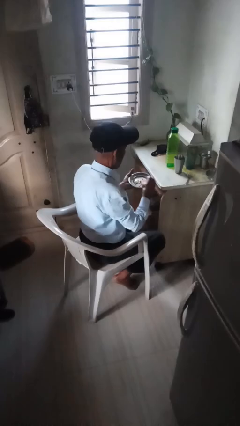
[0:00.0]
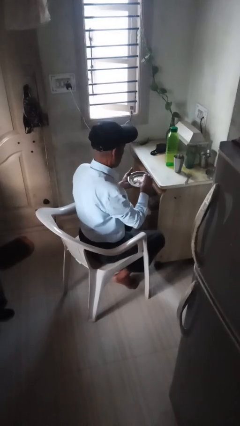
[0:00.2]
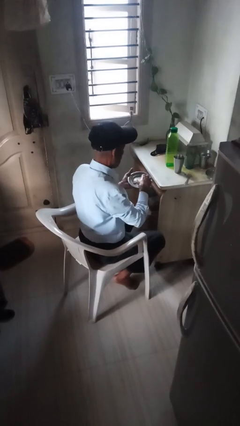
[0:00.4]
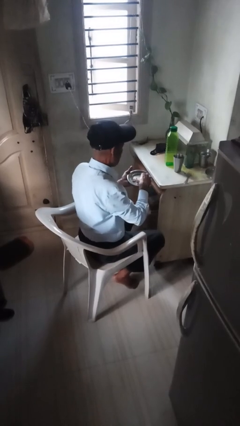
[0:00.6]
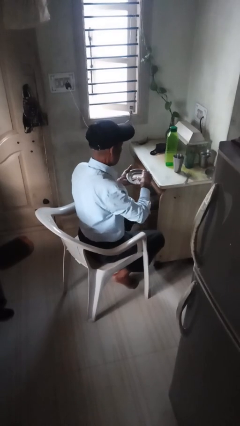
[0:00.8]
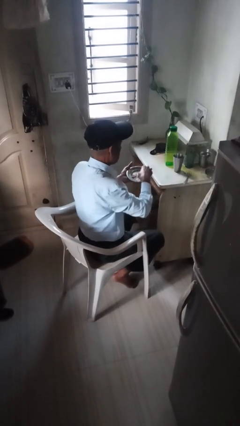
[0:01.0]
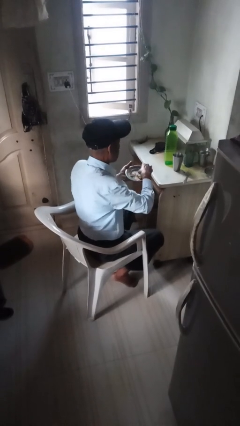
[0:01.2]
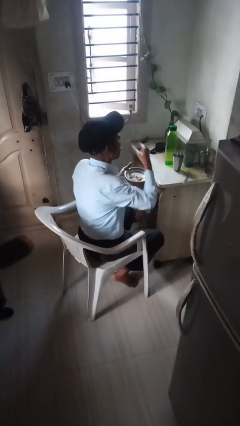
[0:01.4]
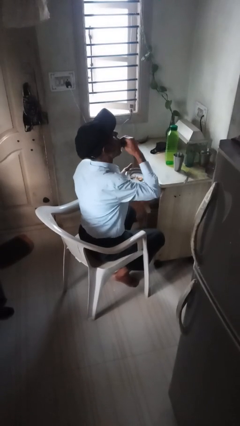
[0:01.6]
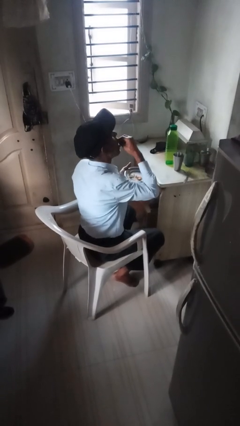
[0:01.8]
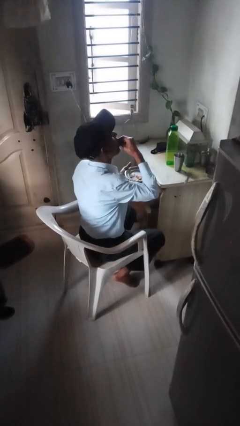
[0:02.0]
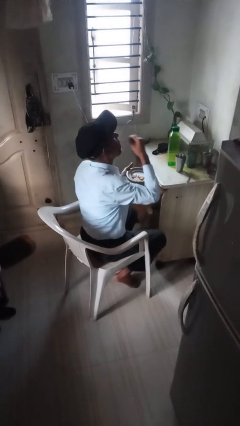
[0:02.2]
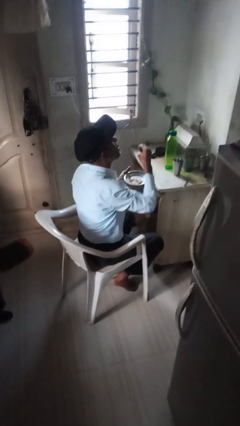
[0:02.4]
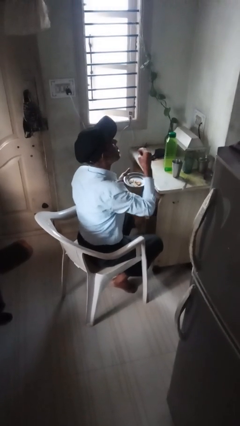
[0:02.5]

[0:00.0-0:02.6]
person eats with hands

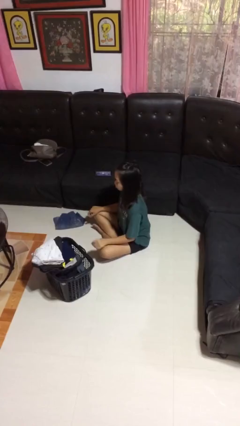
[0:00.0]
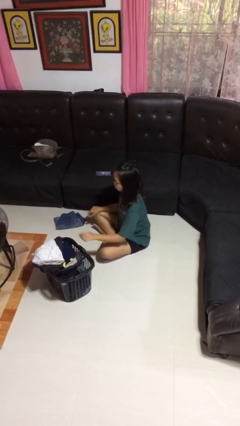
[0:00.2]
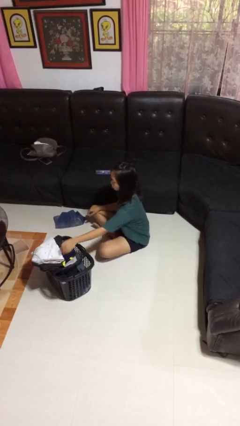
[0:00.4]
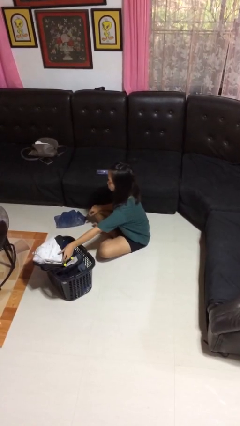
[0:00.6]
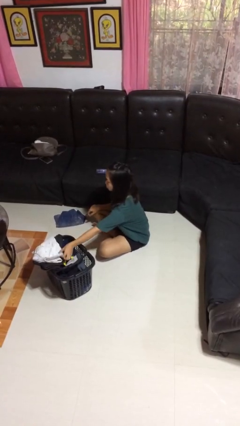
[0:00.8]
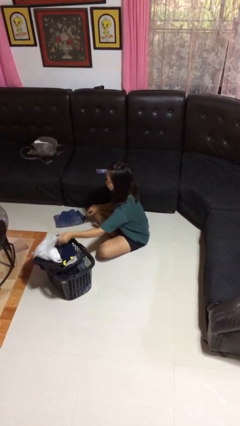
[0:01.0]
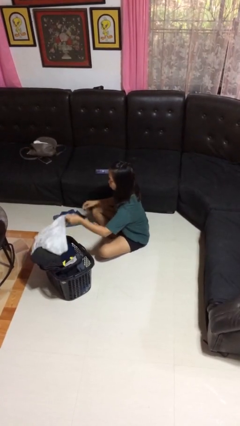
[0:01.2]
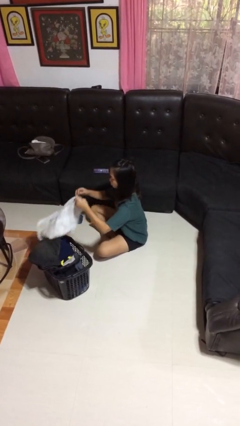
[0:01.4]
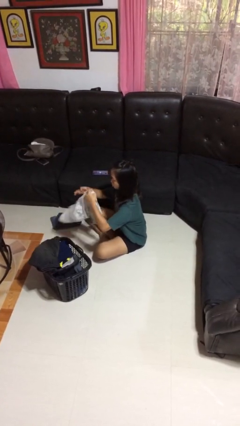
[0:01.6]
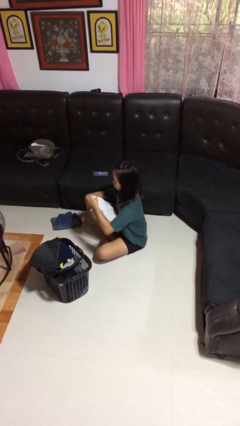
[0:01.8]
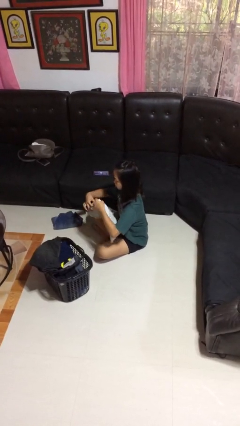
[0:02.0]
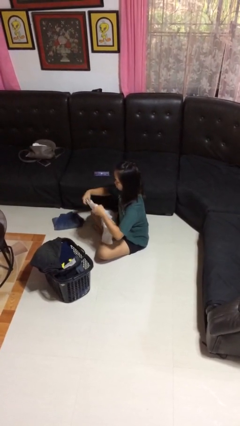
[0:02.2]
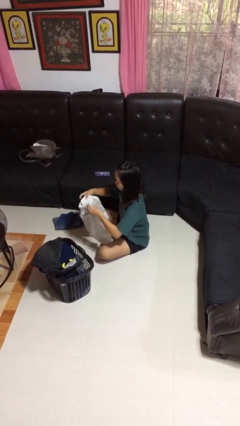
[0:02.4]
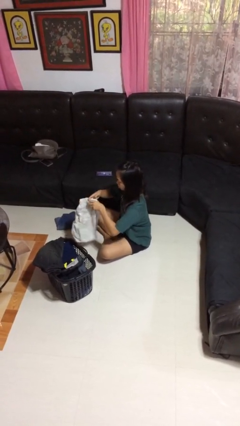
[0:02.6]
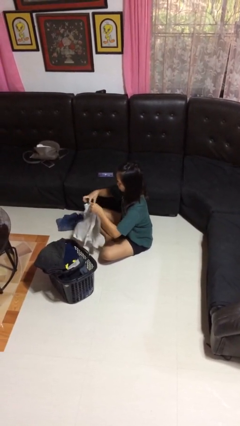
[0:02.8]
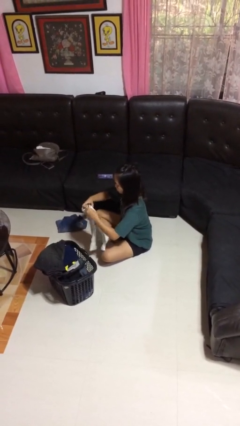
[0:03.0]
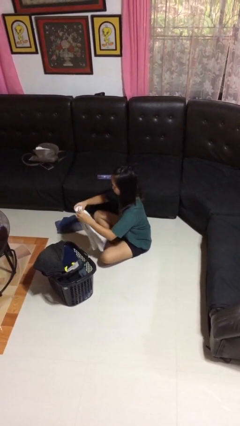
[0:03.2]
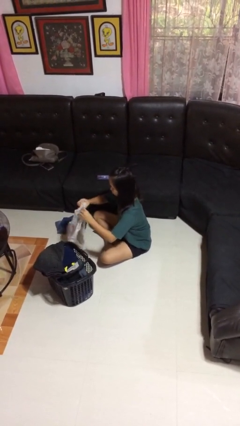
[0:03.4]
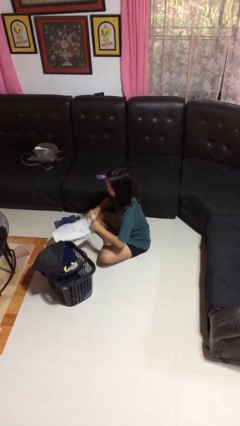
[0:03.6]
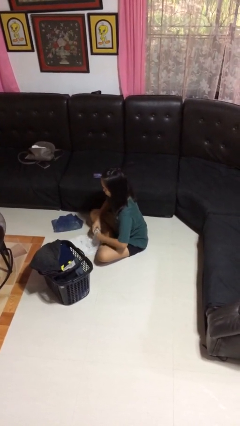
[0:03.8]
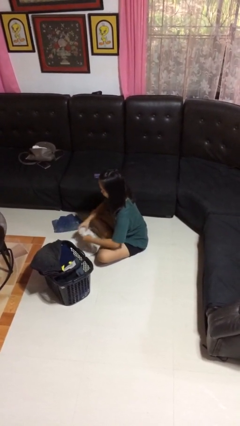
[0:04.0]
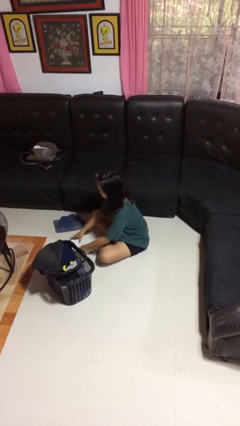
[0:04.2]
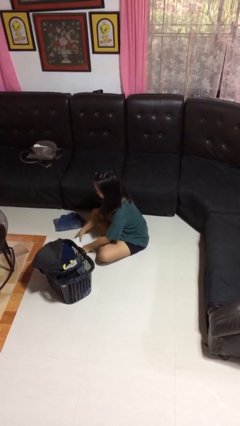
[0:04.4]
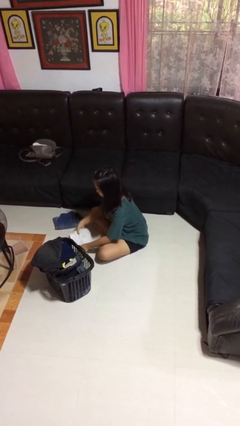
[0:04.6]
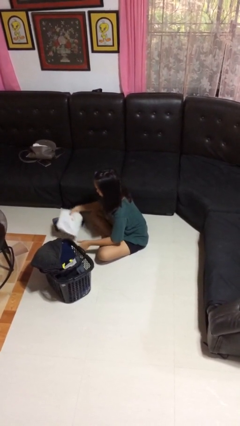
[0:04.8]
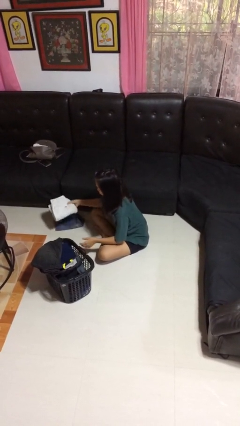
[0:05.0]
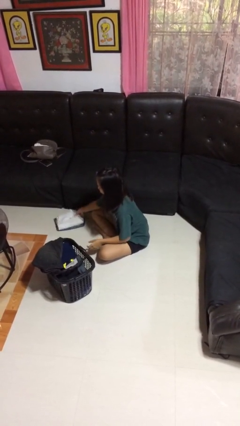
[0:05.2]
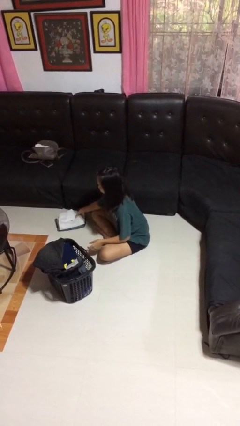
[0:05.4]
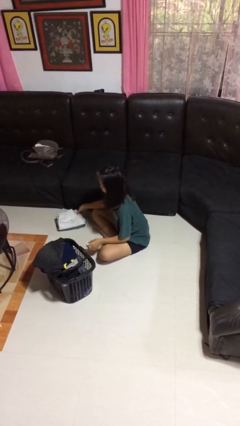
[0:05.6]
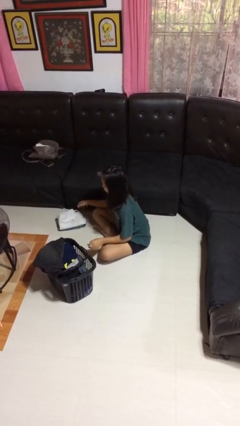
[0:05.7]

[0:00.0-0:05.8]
person folds pants

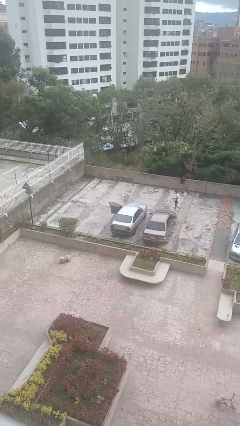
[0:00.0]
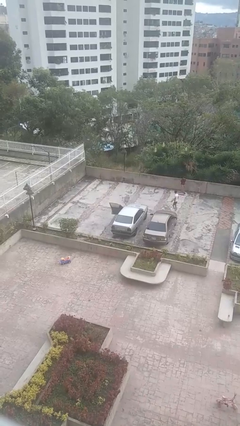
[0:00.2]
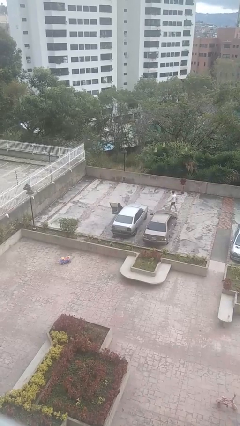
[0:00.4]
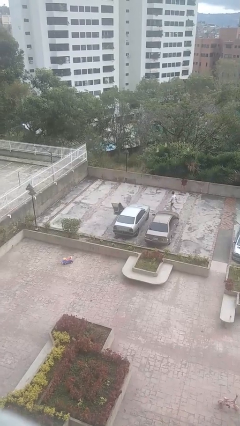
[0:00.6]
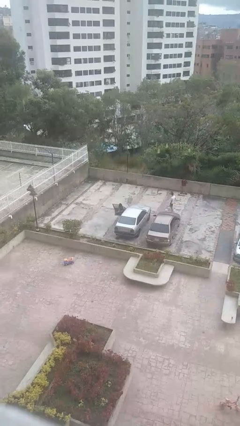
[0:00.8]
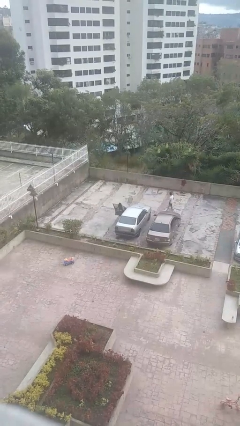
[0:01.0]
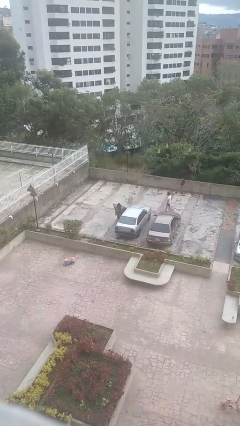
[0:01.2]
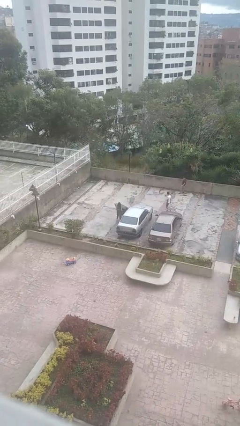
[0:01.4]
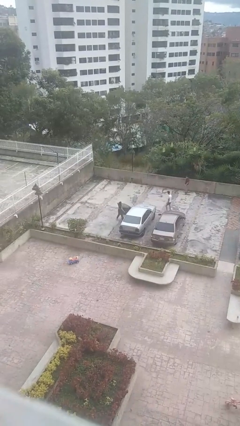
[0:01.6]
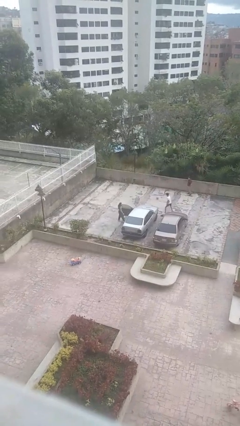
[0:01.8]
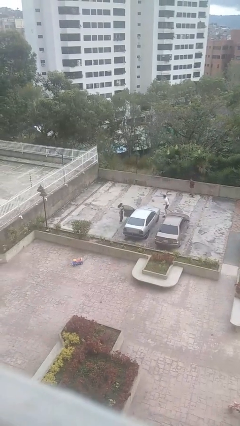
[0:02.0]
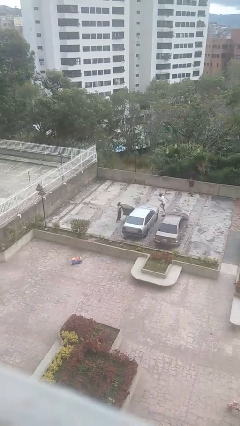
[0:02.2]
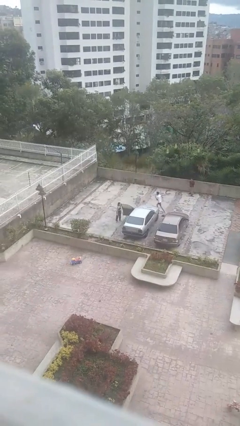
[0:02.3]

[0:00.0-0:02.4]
person exits car

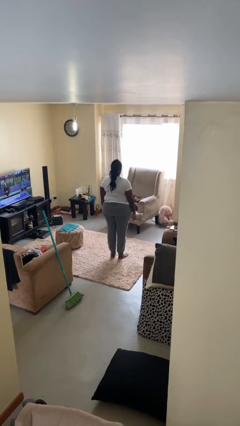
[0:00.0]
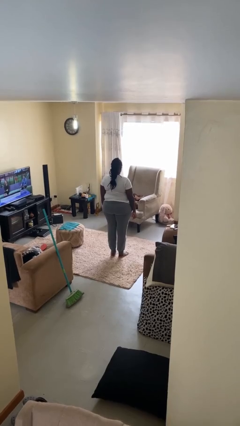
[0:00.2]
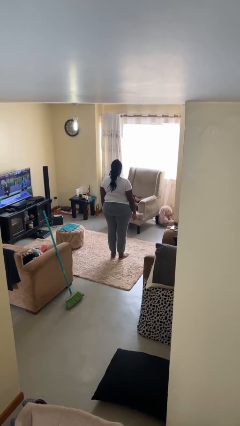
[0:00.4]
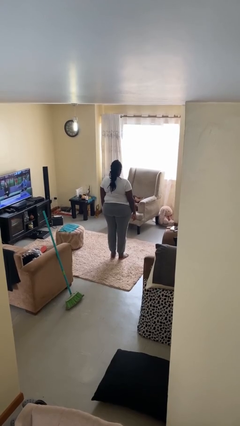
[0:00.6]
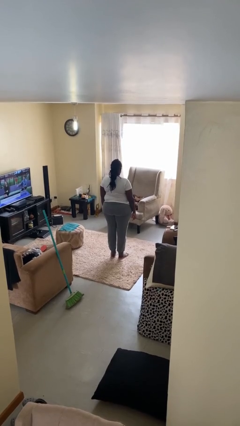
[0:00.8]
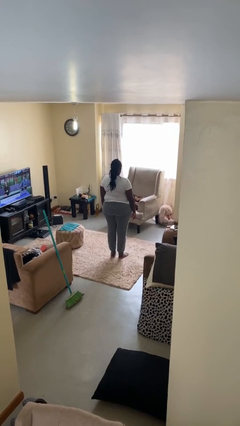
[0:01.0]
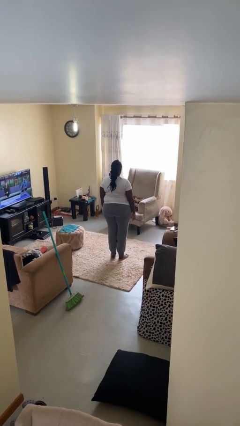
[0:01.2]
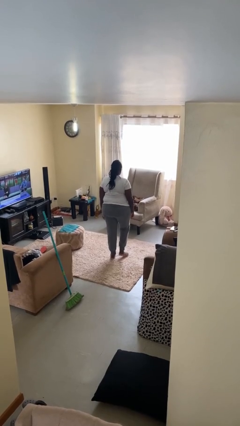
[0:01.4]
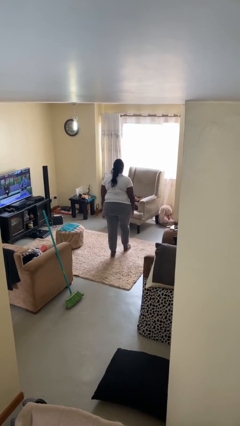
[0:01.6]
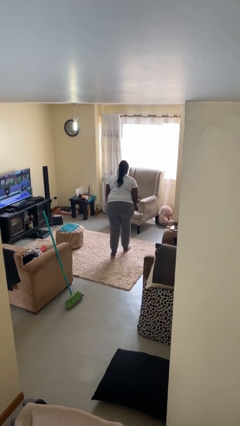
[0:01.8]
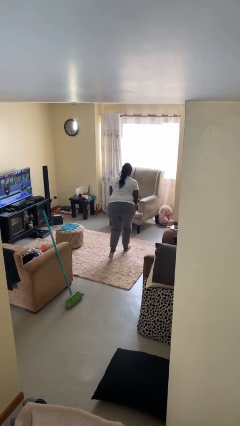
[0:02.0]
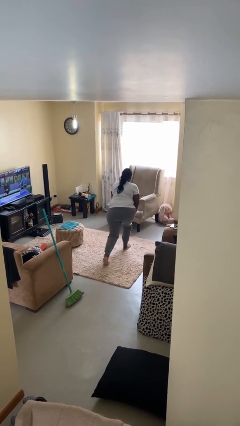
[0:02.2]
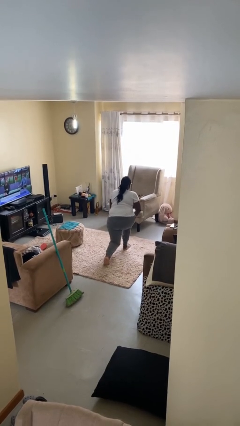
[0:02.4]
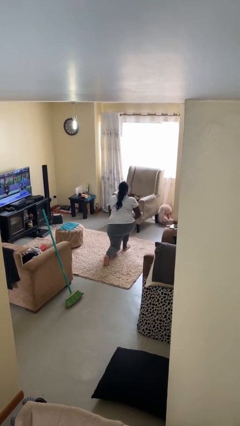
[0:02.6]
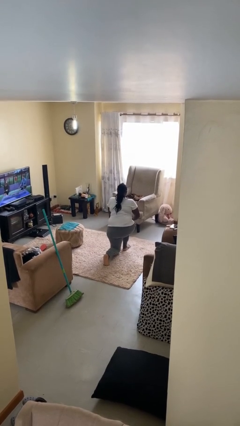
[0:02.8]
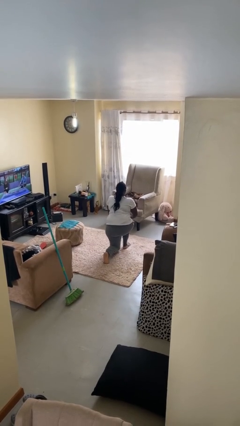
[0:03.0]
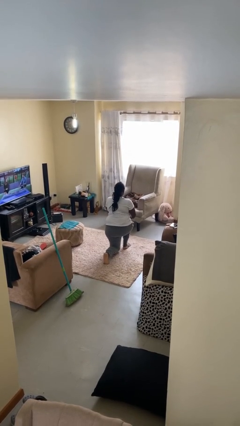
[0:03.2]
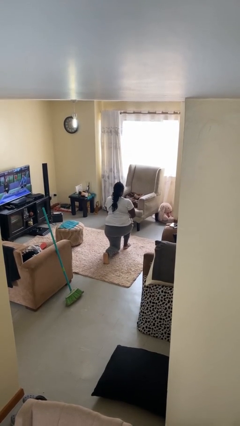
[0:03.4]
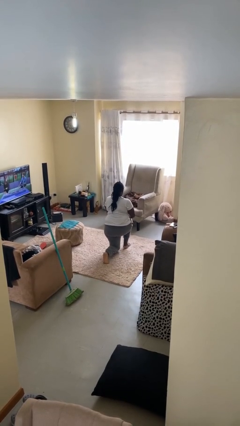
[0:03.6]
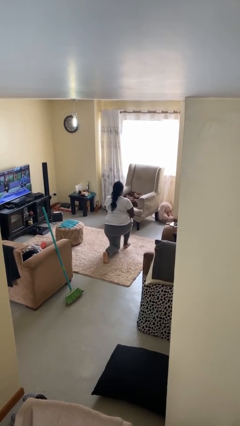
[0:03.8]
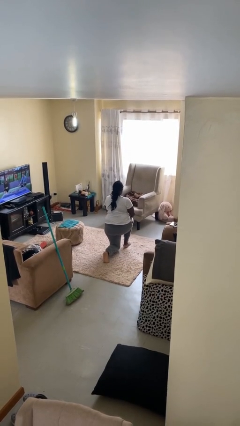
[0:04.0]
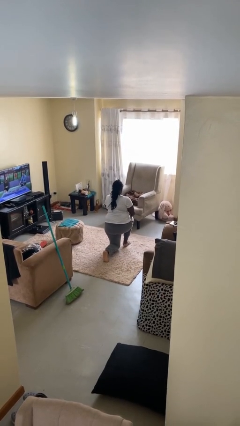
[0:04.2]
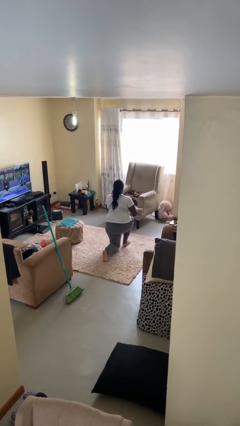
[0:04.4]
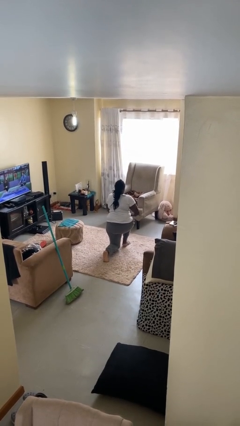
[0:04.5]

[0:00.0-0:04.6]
person kneels

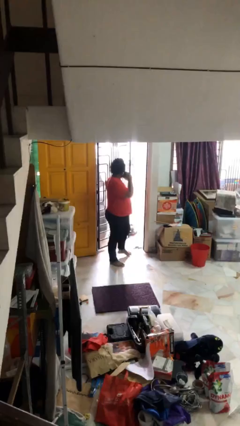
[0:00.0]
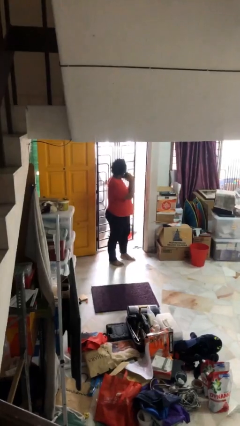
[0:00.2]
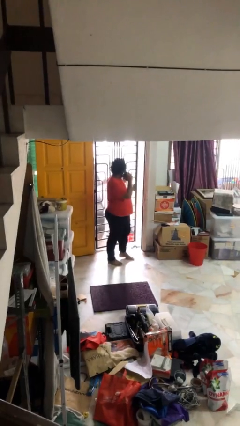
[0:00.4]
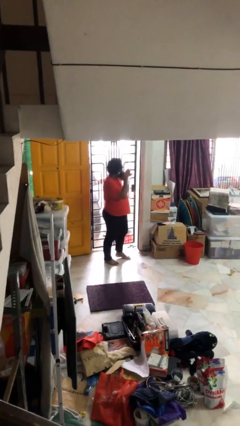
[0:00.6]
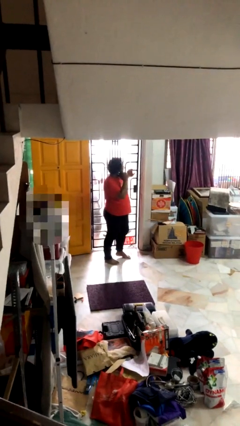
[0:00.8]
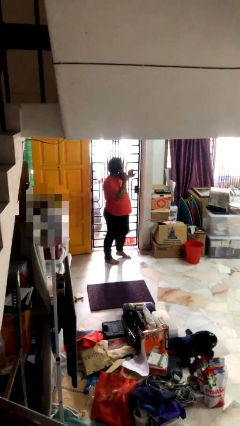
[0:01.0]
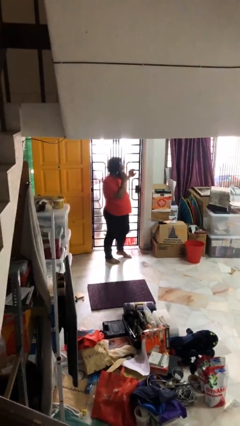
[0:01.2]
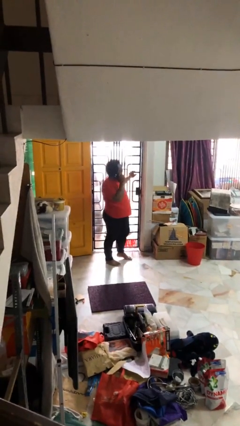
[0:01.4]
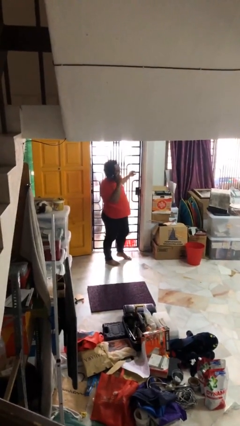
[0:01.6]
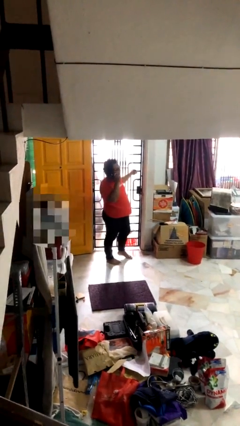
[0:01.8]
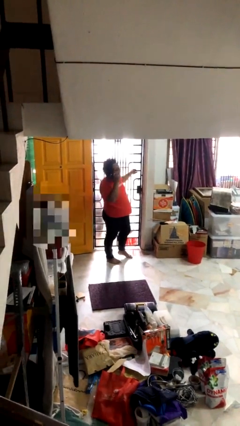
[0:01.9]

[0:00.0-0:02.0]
person closes facility door

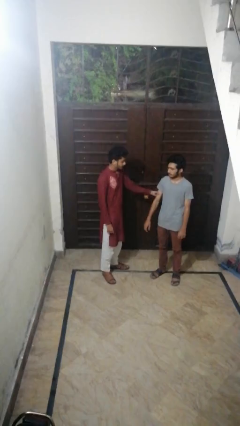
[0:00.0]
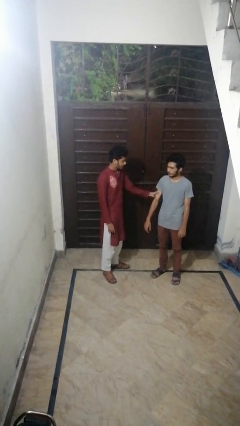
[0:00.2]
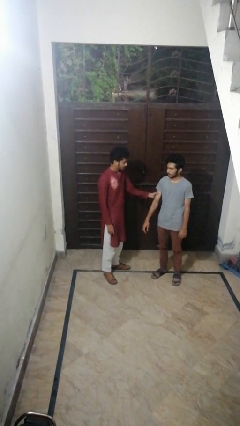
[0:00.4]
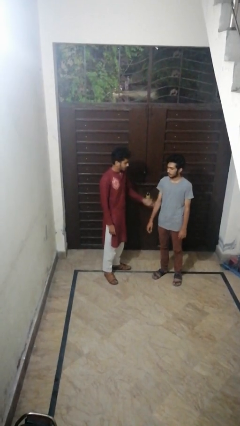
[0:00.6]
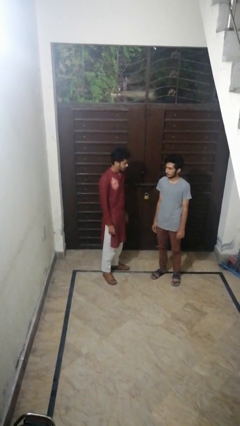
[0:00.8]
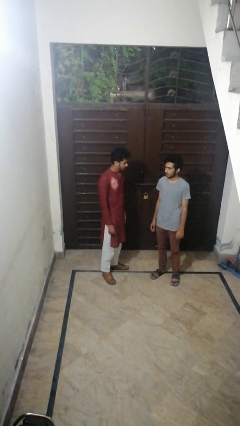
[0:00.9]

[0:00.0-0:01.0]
person grabs person by bicep
